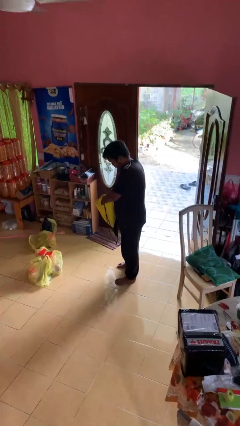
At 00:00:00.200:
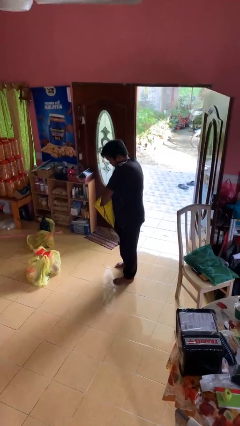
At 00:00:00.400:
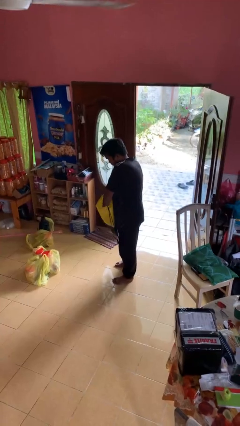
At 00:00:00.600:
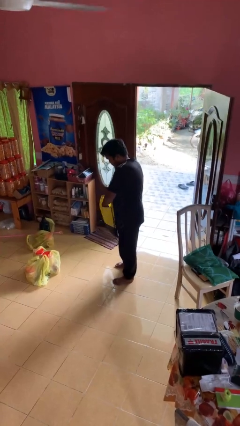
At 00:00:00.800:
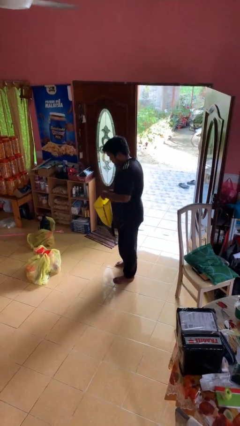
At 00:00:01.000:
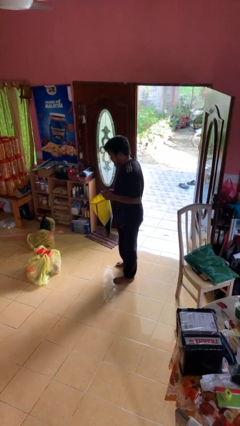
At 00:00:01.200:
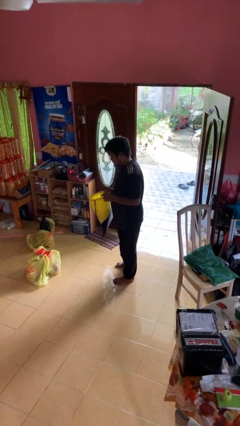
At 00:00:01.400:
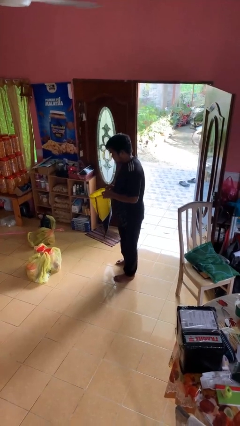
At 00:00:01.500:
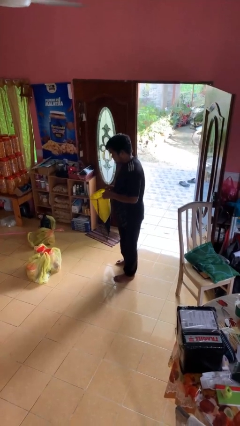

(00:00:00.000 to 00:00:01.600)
person puts object into bag

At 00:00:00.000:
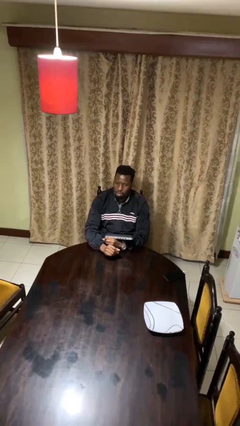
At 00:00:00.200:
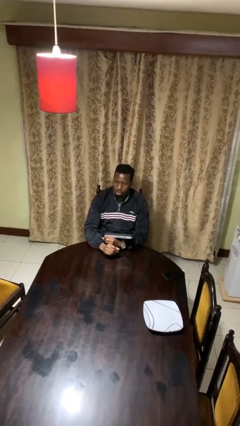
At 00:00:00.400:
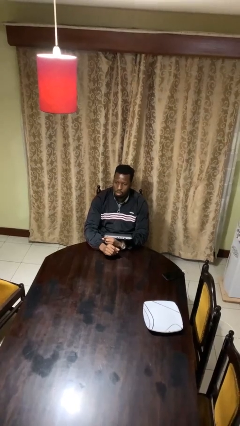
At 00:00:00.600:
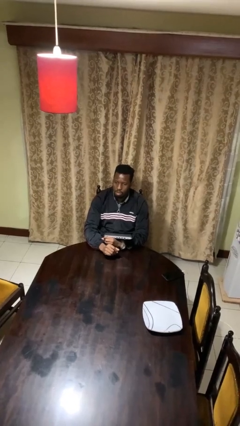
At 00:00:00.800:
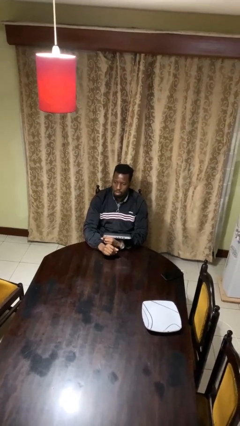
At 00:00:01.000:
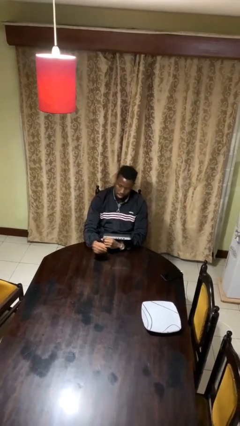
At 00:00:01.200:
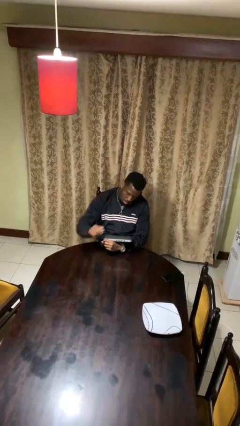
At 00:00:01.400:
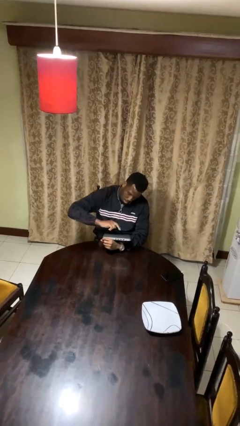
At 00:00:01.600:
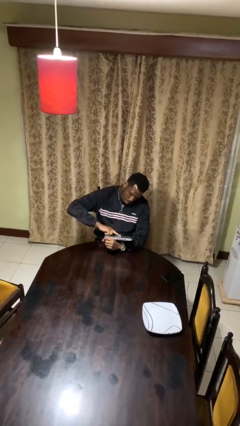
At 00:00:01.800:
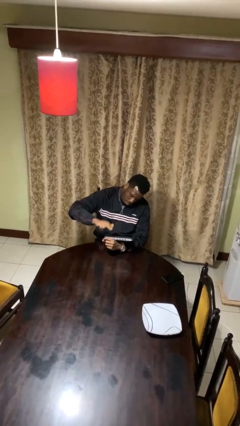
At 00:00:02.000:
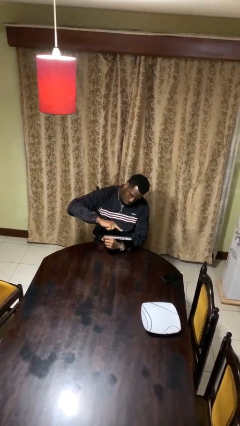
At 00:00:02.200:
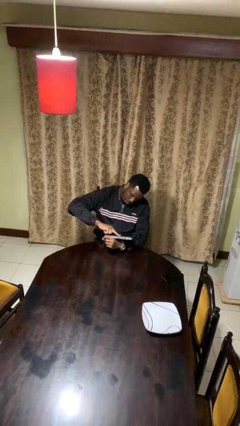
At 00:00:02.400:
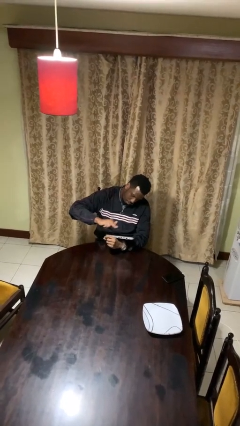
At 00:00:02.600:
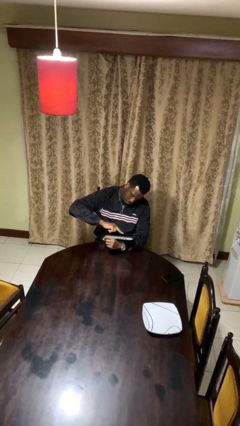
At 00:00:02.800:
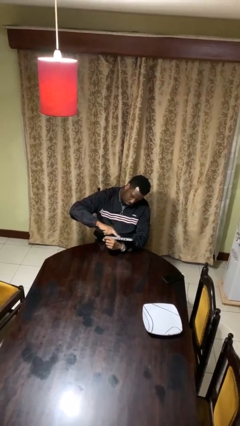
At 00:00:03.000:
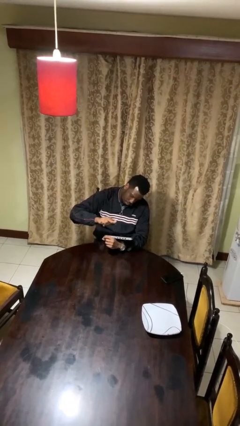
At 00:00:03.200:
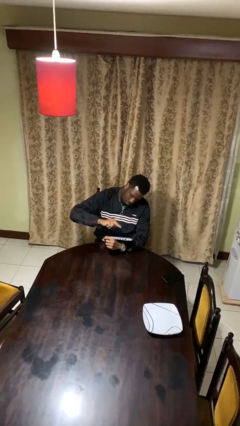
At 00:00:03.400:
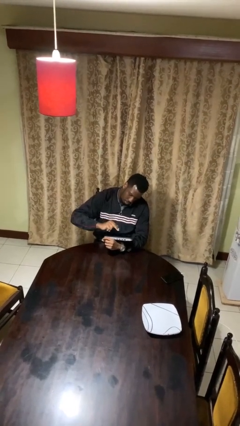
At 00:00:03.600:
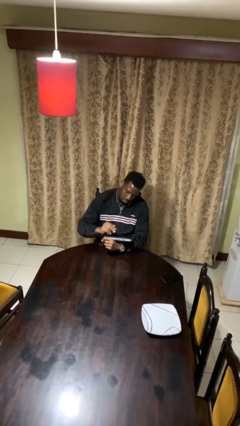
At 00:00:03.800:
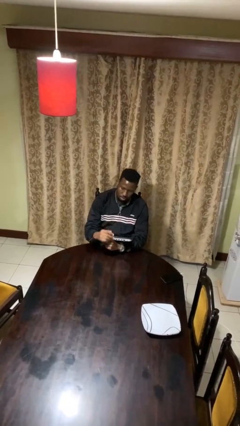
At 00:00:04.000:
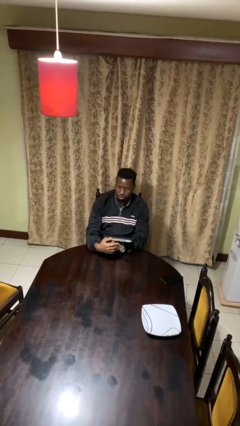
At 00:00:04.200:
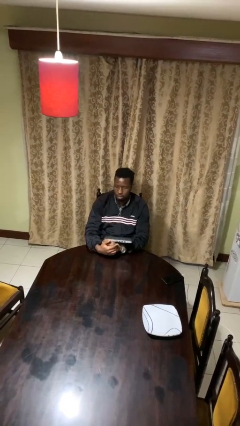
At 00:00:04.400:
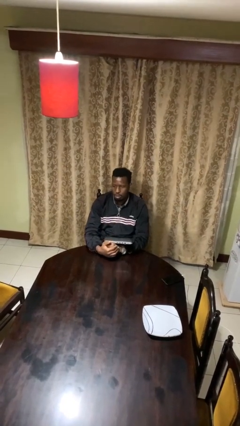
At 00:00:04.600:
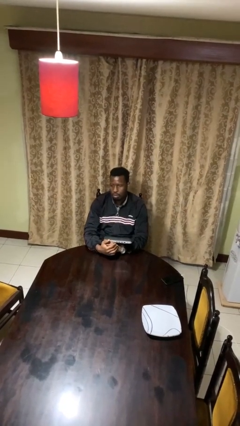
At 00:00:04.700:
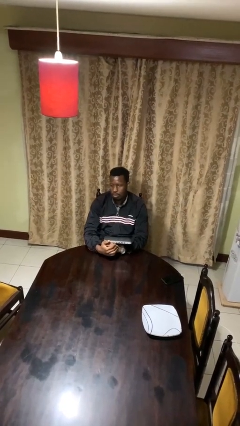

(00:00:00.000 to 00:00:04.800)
person interacts with tablet

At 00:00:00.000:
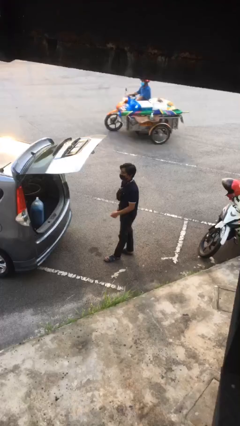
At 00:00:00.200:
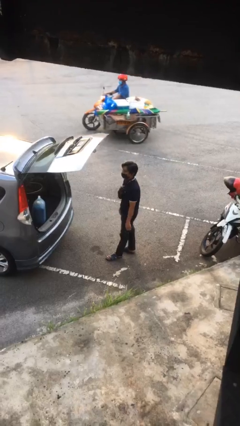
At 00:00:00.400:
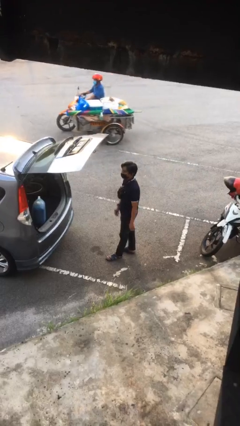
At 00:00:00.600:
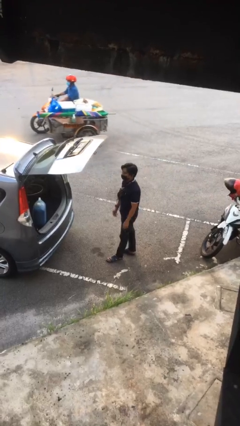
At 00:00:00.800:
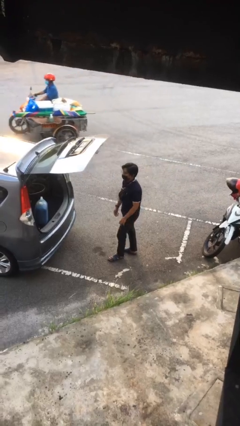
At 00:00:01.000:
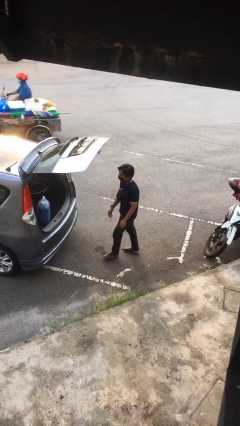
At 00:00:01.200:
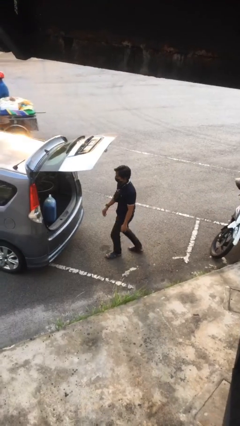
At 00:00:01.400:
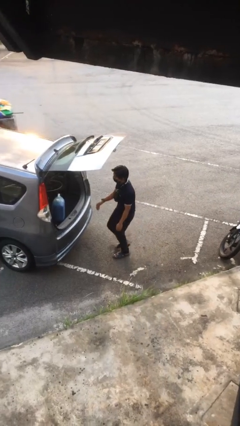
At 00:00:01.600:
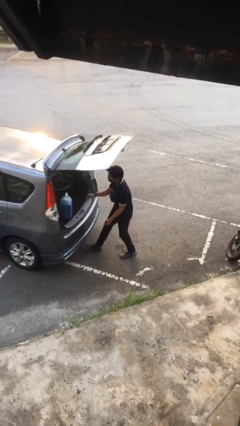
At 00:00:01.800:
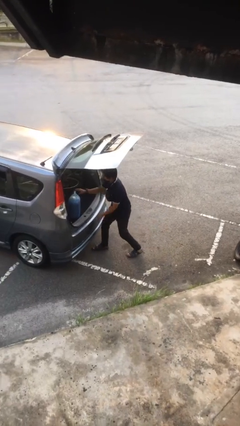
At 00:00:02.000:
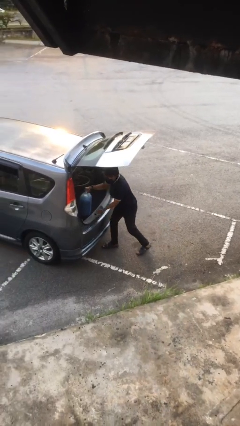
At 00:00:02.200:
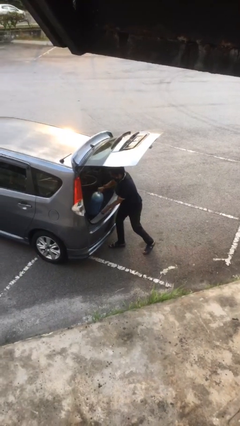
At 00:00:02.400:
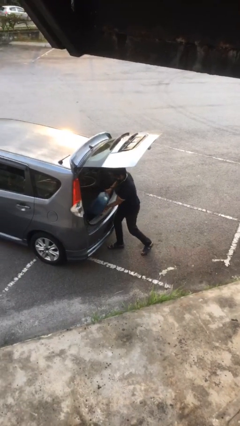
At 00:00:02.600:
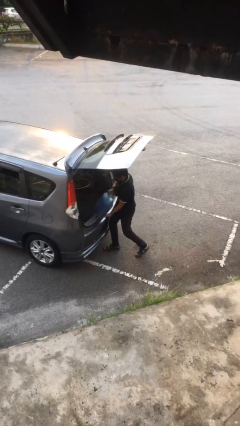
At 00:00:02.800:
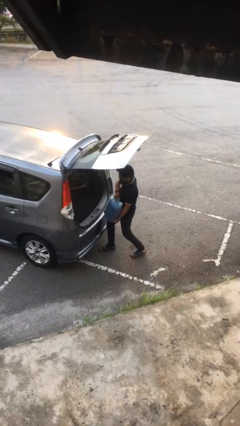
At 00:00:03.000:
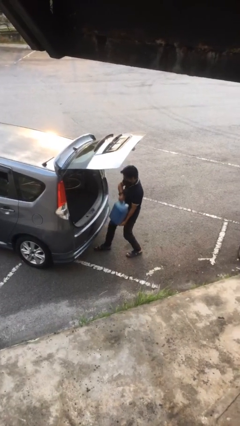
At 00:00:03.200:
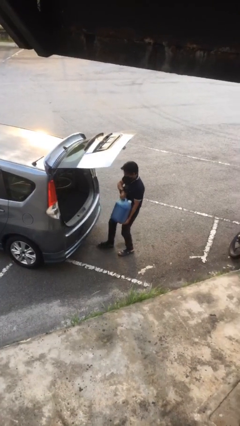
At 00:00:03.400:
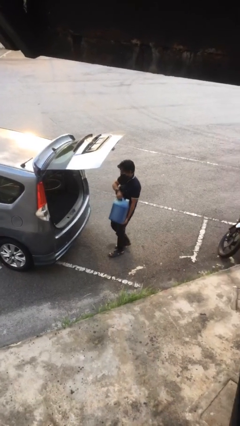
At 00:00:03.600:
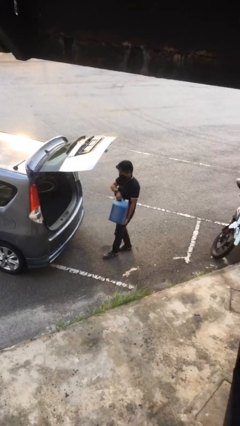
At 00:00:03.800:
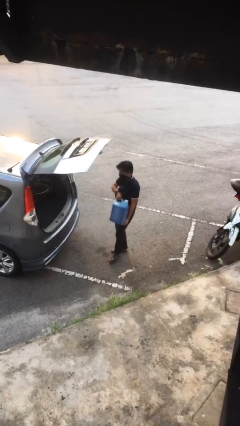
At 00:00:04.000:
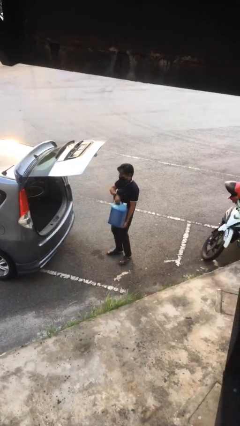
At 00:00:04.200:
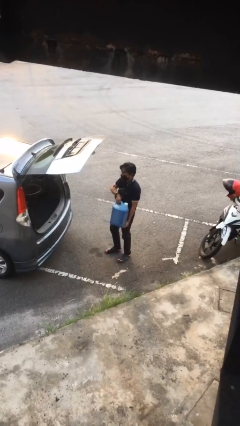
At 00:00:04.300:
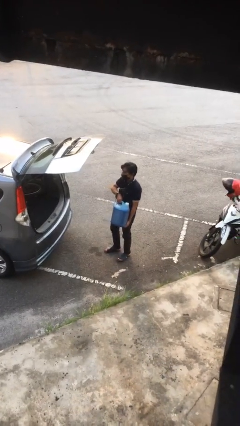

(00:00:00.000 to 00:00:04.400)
person unloads car

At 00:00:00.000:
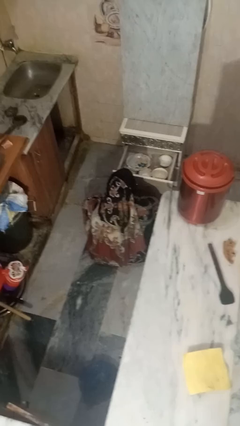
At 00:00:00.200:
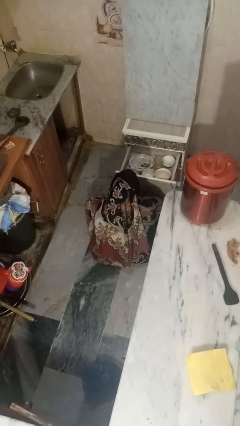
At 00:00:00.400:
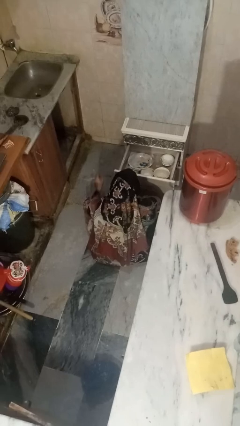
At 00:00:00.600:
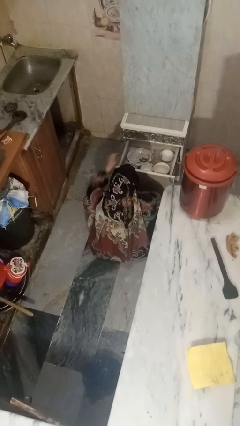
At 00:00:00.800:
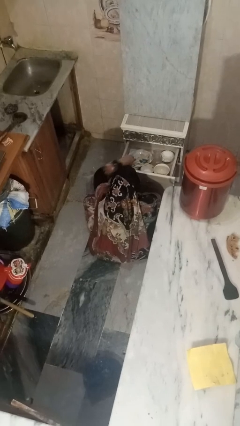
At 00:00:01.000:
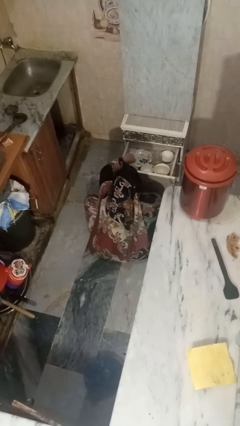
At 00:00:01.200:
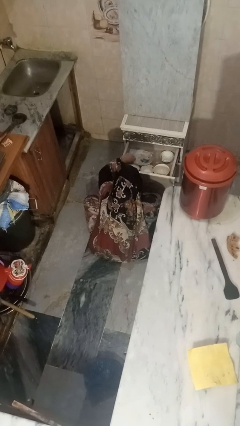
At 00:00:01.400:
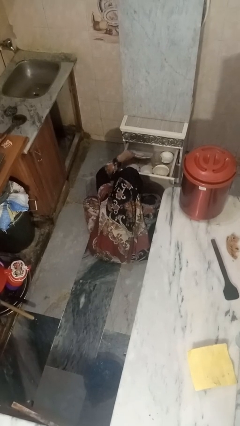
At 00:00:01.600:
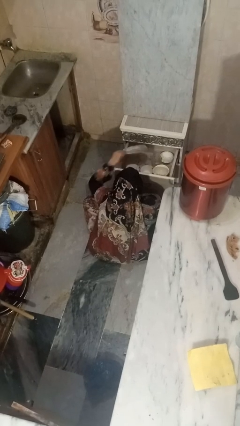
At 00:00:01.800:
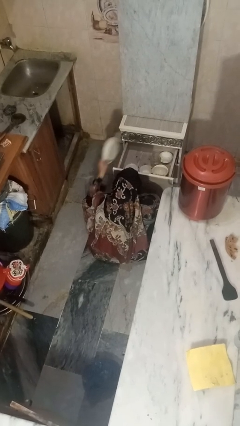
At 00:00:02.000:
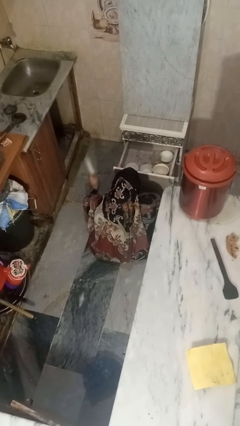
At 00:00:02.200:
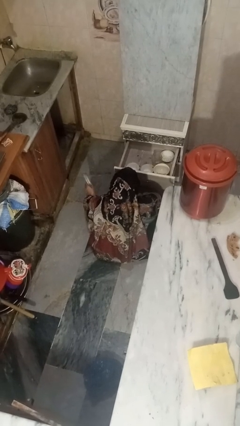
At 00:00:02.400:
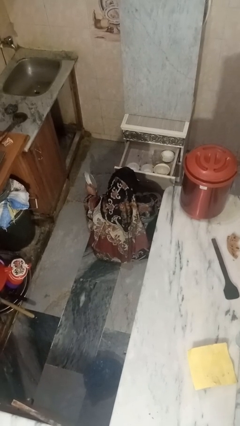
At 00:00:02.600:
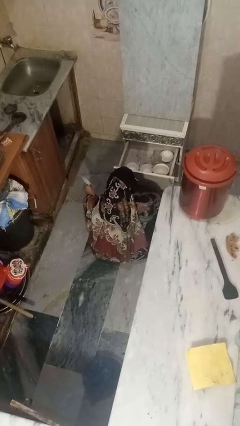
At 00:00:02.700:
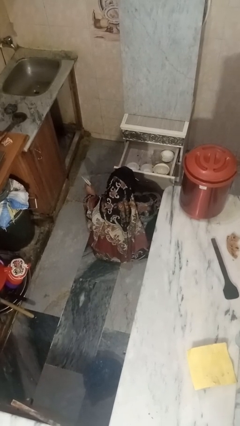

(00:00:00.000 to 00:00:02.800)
person takes object from kitchen drawer

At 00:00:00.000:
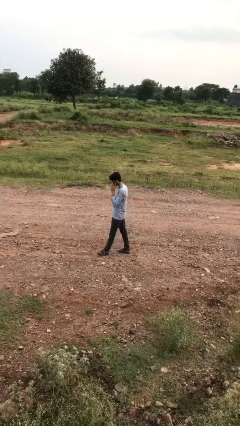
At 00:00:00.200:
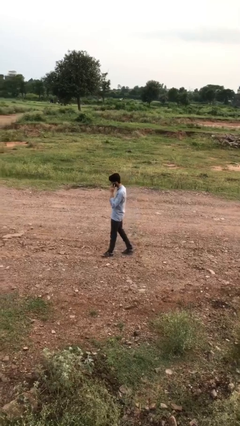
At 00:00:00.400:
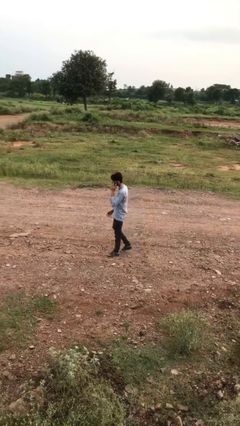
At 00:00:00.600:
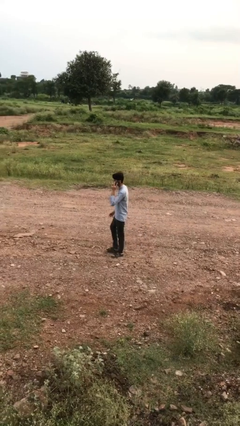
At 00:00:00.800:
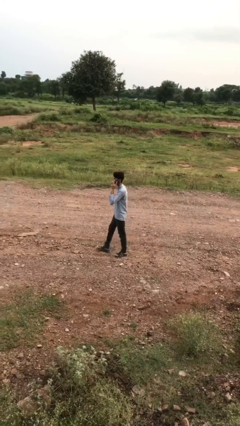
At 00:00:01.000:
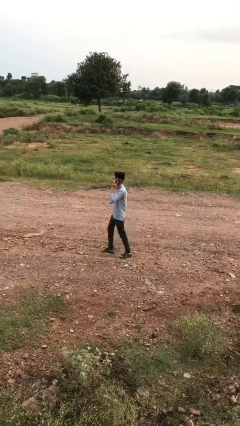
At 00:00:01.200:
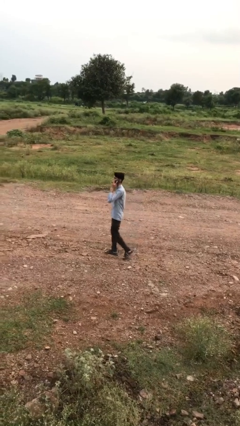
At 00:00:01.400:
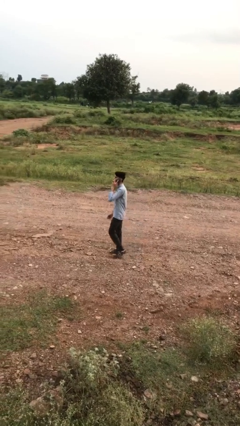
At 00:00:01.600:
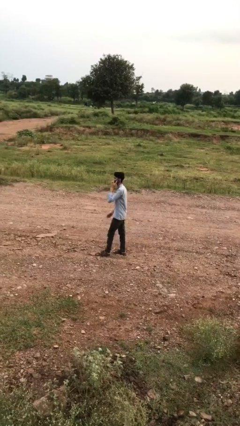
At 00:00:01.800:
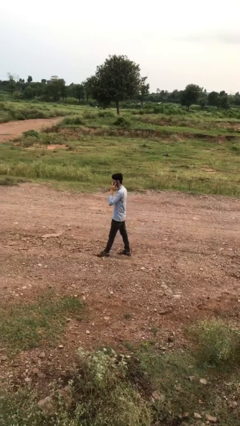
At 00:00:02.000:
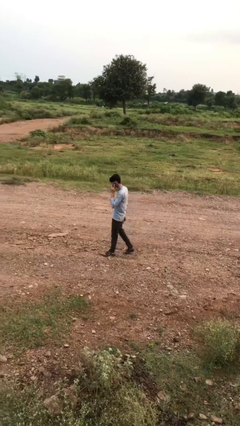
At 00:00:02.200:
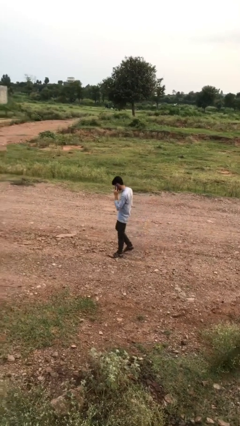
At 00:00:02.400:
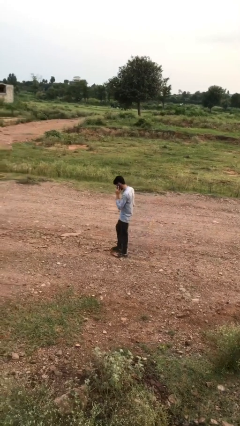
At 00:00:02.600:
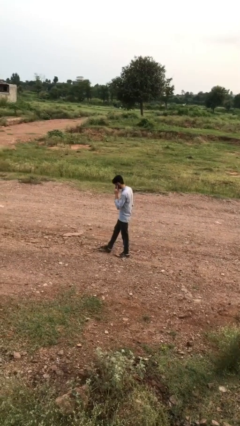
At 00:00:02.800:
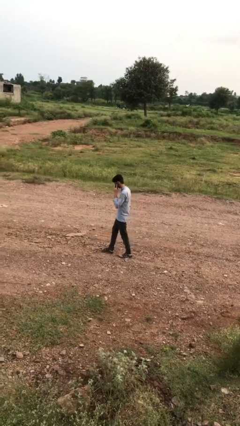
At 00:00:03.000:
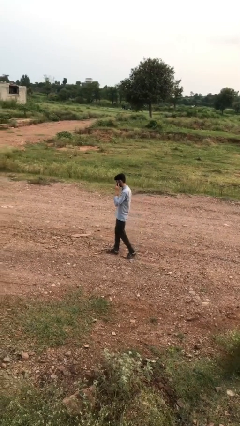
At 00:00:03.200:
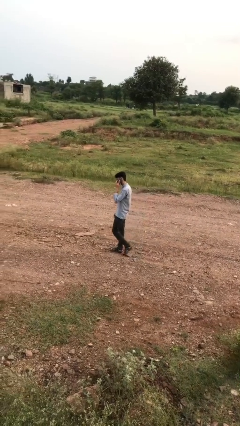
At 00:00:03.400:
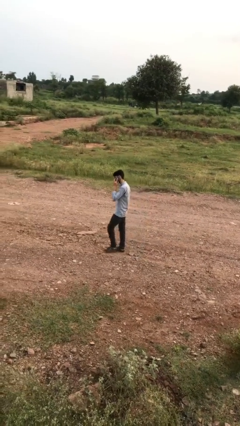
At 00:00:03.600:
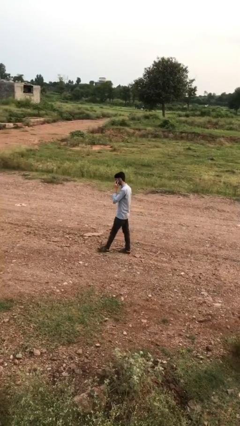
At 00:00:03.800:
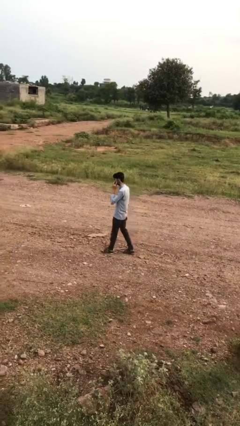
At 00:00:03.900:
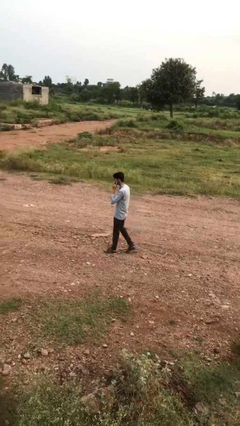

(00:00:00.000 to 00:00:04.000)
person talks on phone
